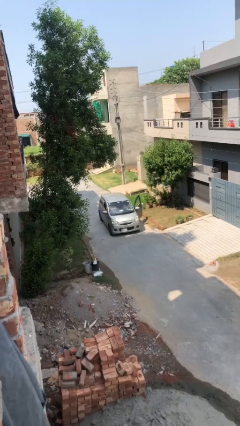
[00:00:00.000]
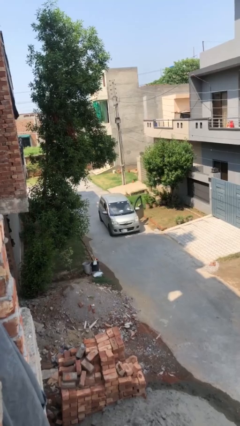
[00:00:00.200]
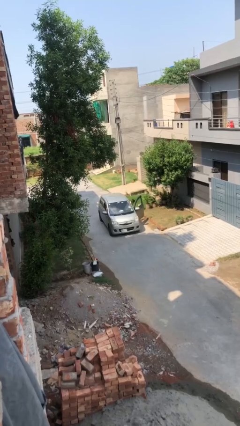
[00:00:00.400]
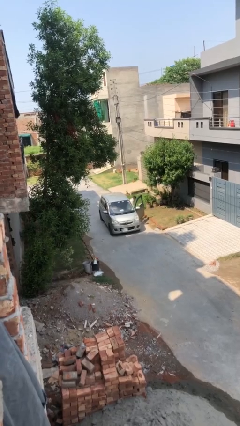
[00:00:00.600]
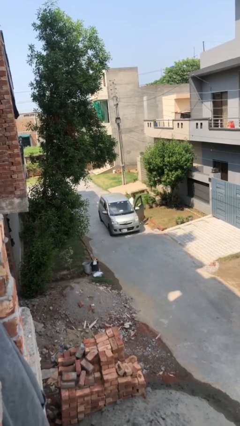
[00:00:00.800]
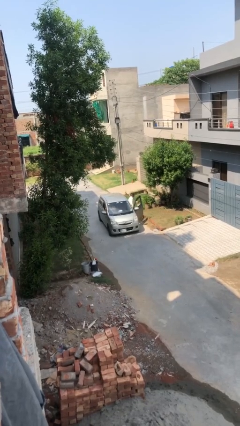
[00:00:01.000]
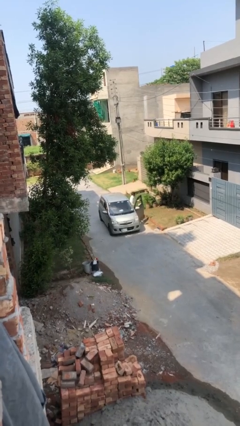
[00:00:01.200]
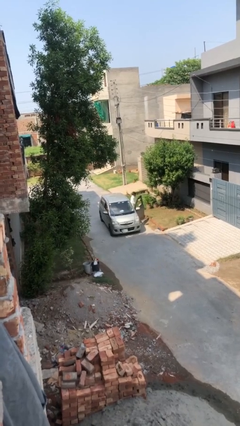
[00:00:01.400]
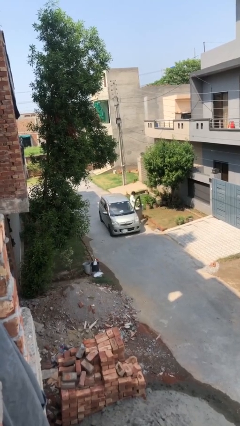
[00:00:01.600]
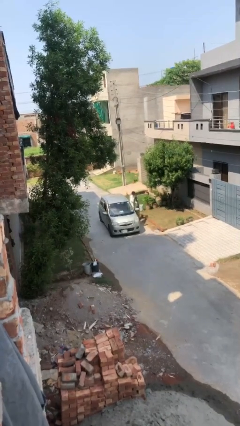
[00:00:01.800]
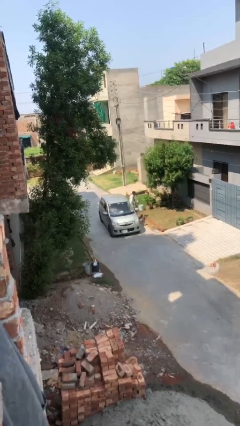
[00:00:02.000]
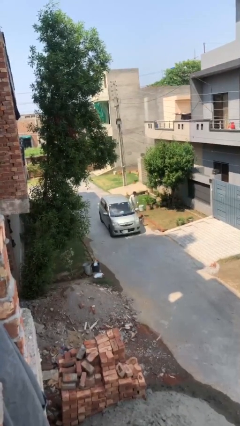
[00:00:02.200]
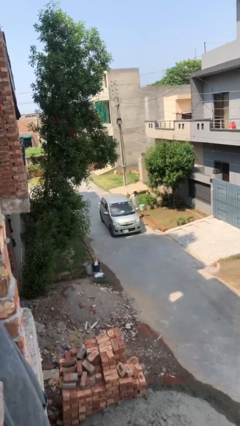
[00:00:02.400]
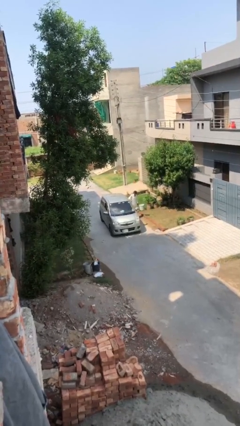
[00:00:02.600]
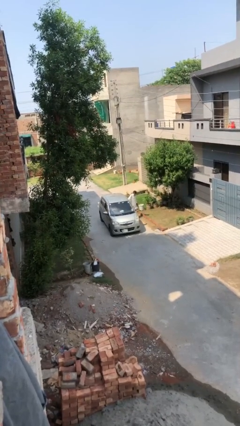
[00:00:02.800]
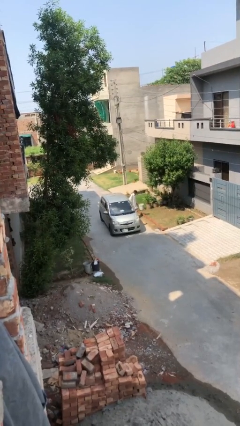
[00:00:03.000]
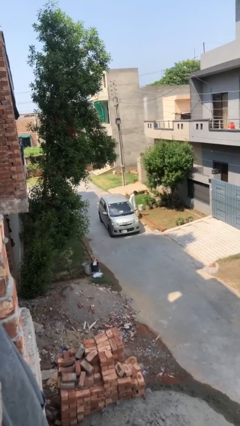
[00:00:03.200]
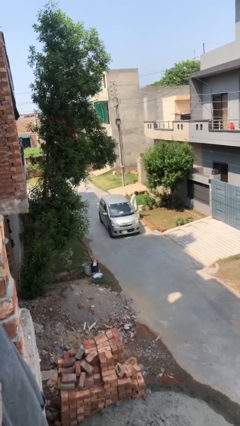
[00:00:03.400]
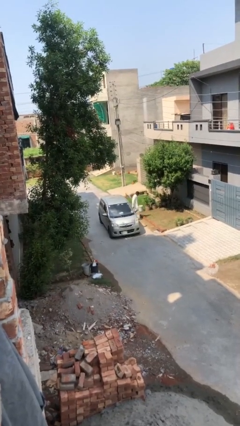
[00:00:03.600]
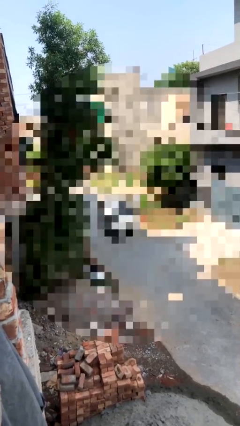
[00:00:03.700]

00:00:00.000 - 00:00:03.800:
car drops off person

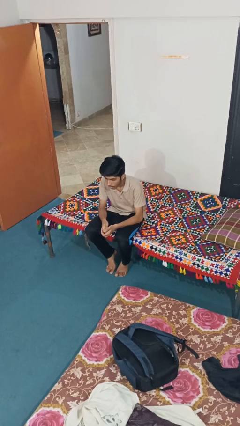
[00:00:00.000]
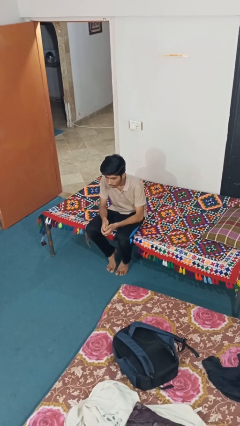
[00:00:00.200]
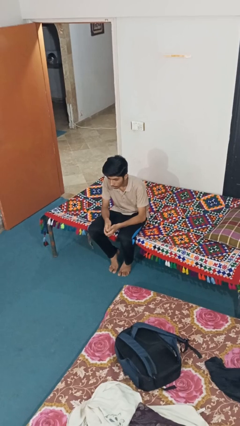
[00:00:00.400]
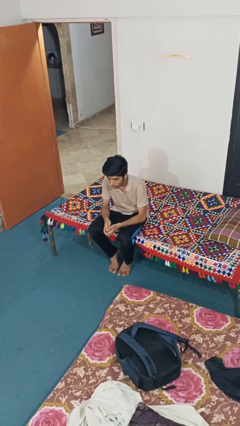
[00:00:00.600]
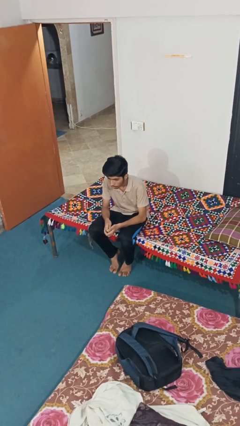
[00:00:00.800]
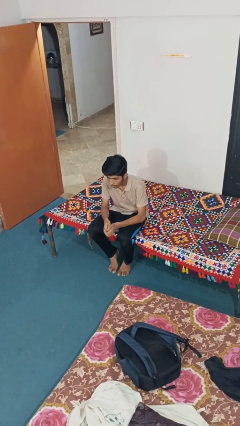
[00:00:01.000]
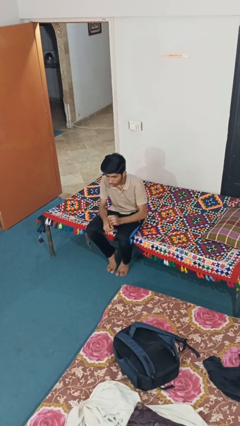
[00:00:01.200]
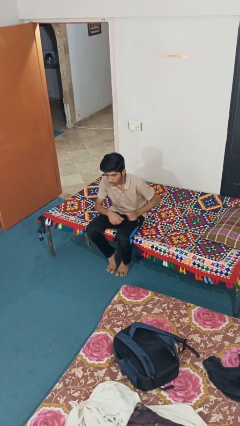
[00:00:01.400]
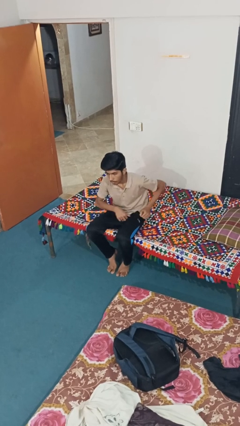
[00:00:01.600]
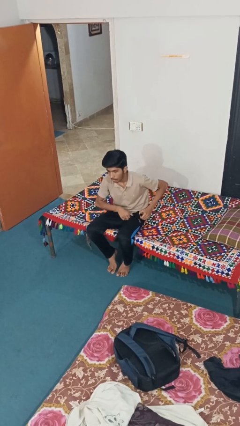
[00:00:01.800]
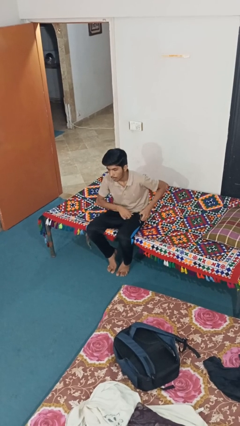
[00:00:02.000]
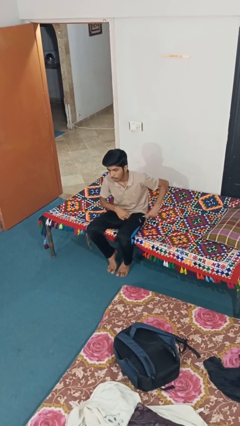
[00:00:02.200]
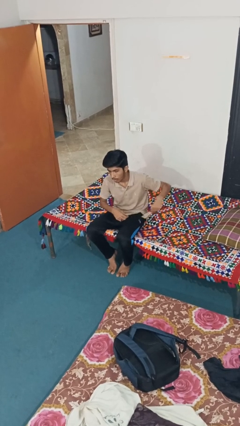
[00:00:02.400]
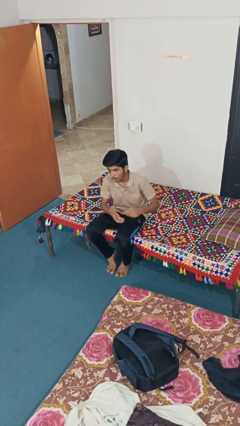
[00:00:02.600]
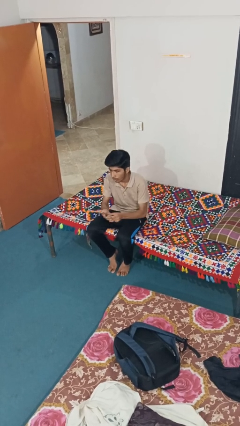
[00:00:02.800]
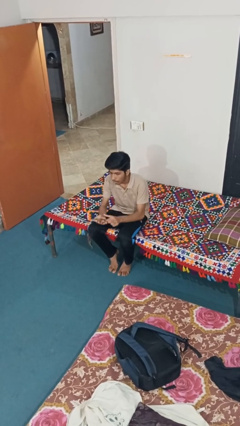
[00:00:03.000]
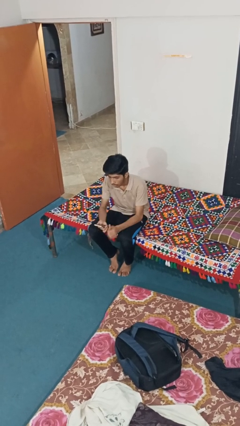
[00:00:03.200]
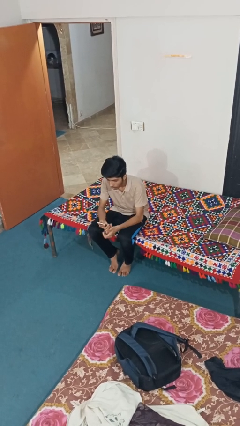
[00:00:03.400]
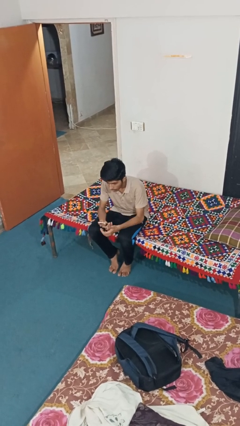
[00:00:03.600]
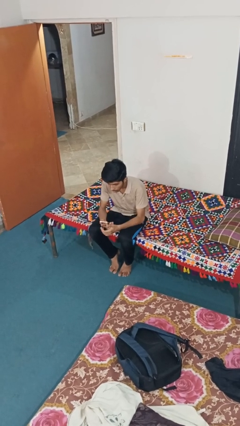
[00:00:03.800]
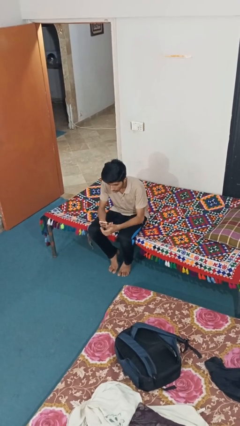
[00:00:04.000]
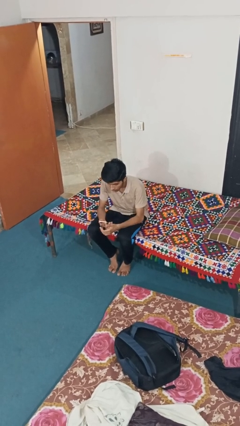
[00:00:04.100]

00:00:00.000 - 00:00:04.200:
person takes phone from pocket

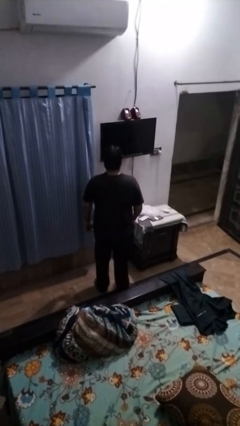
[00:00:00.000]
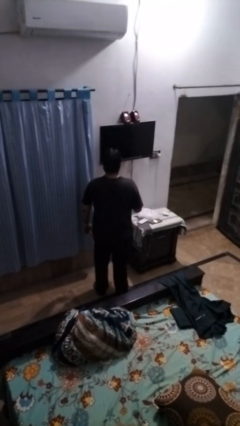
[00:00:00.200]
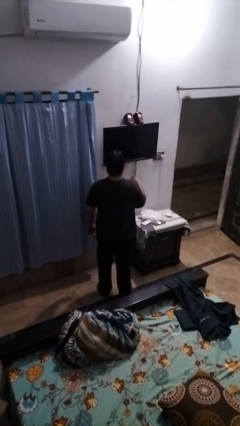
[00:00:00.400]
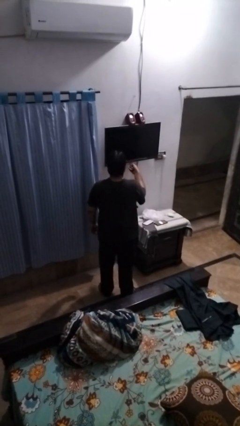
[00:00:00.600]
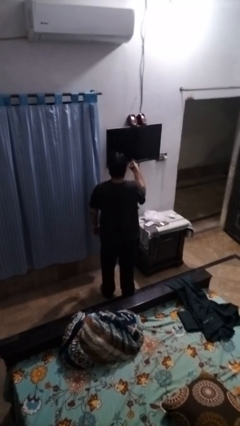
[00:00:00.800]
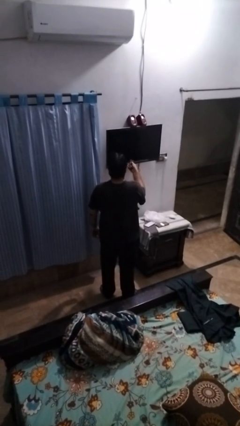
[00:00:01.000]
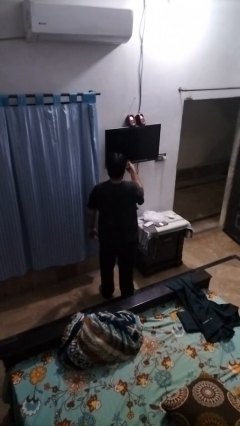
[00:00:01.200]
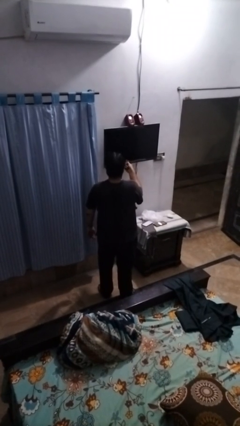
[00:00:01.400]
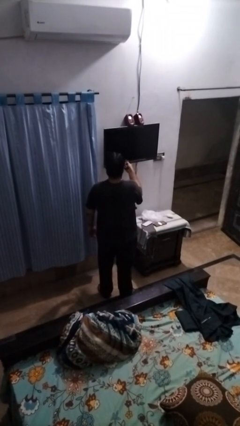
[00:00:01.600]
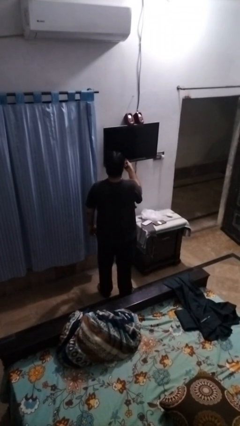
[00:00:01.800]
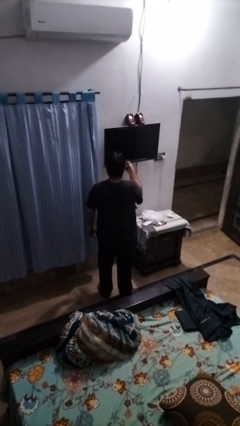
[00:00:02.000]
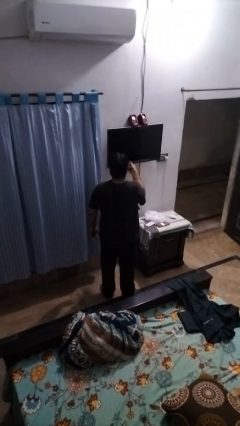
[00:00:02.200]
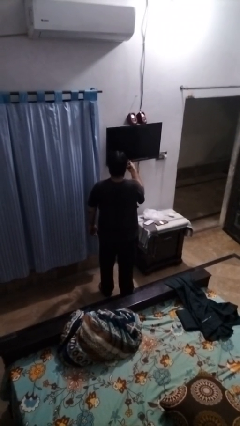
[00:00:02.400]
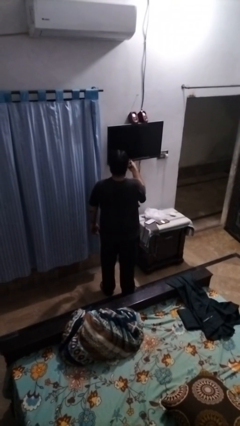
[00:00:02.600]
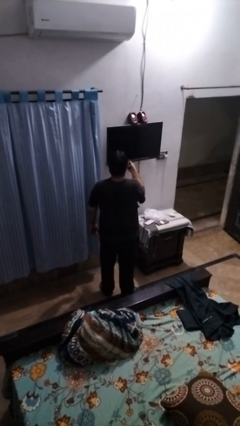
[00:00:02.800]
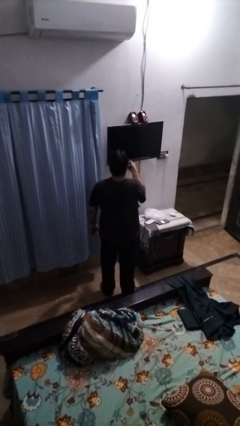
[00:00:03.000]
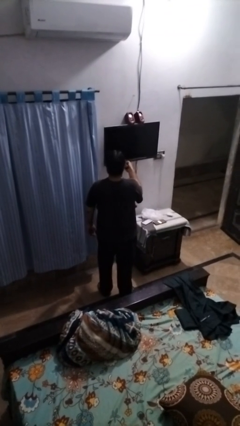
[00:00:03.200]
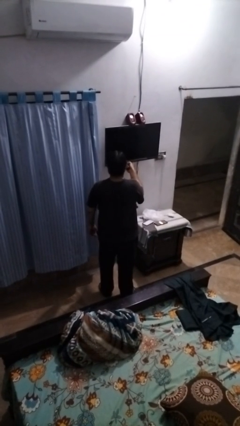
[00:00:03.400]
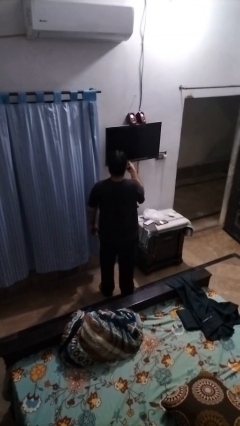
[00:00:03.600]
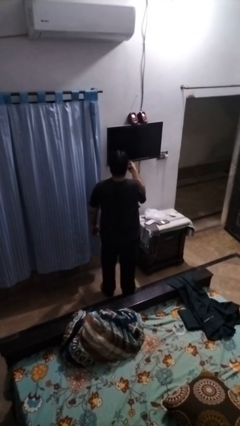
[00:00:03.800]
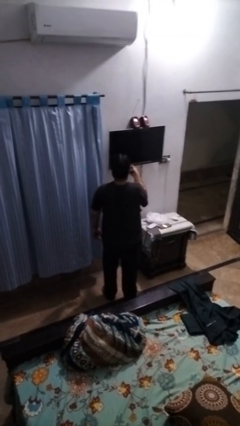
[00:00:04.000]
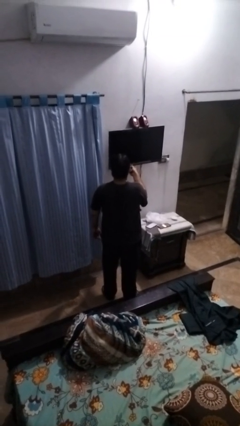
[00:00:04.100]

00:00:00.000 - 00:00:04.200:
person uses television remote

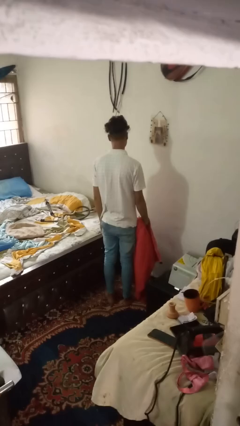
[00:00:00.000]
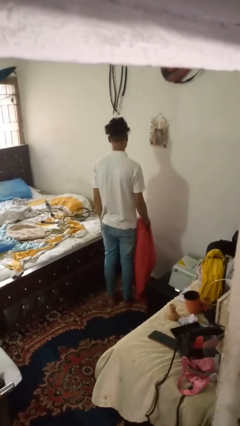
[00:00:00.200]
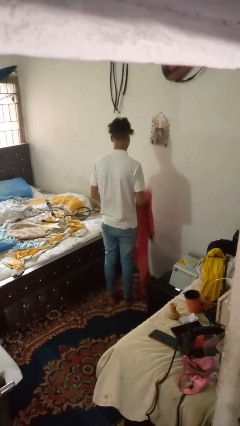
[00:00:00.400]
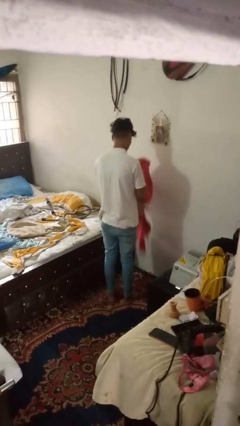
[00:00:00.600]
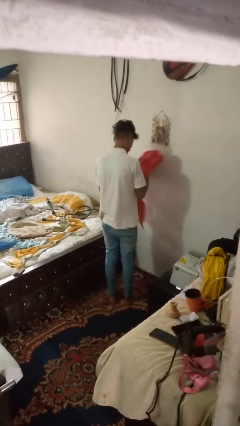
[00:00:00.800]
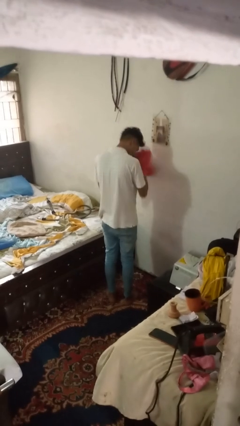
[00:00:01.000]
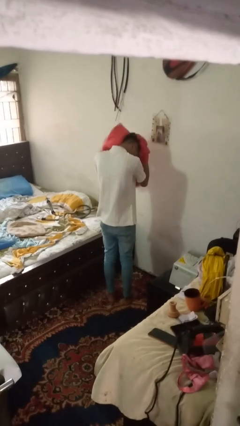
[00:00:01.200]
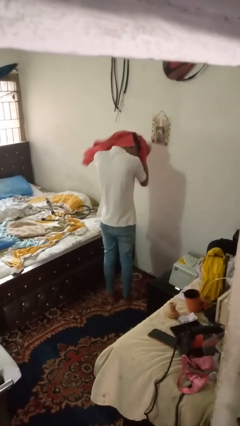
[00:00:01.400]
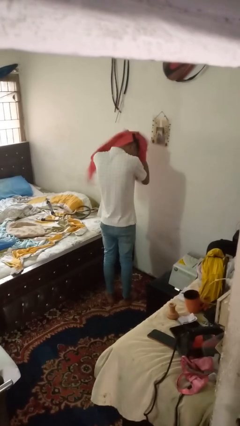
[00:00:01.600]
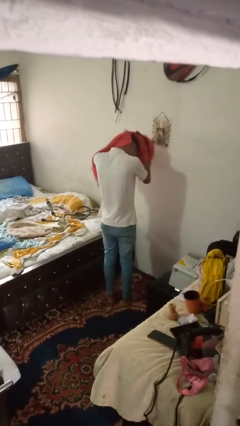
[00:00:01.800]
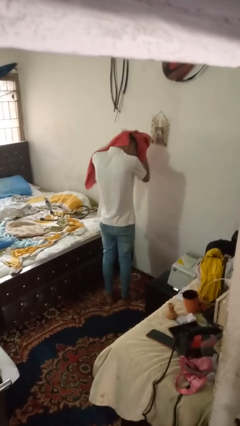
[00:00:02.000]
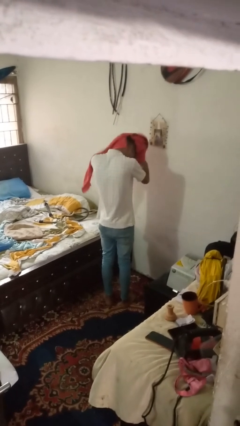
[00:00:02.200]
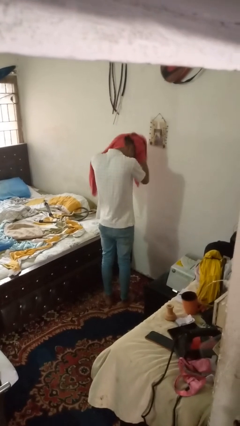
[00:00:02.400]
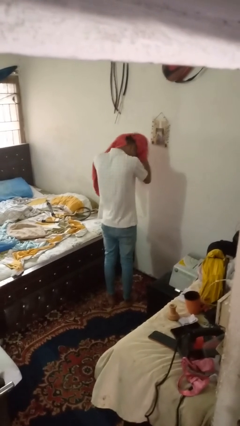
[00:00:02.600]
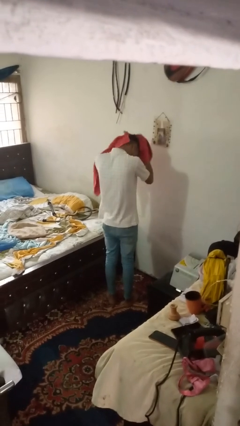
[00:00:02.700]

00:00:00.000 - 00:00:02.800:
person dries hair with towel

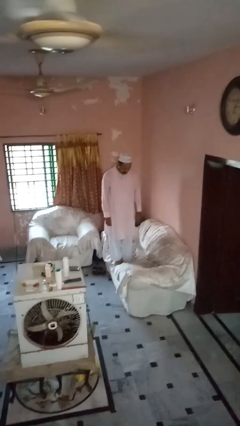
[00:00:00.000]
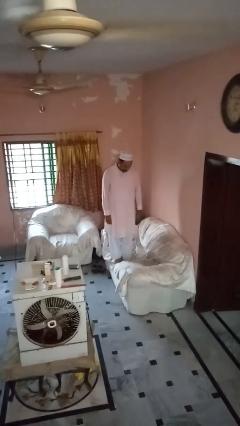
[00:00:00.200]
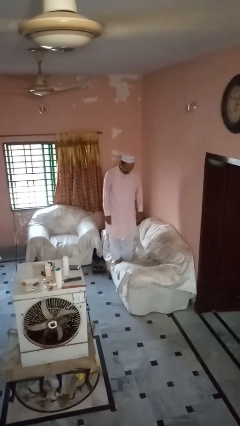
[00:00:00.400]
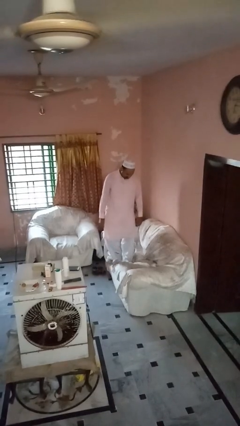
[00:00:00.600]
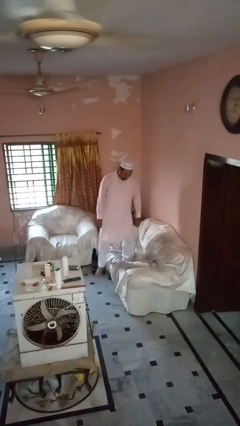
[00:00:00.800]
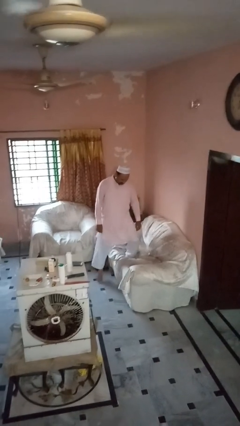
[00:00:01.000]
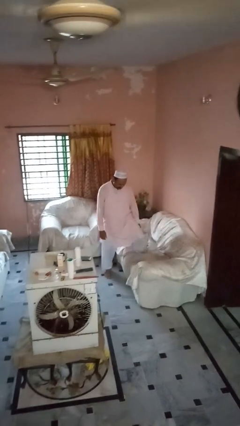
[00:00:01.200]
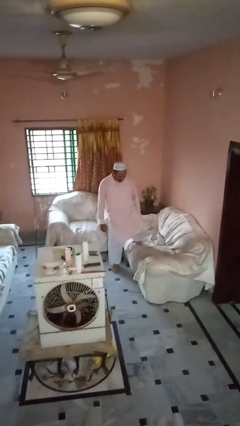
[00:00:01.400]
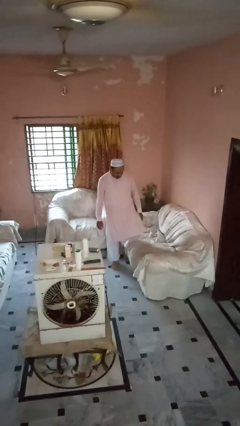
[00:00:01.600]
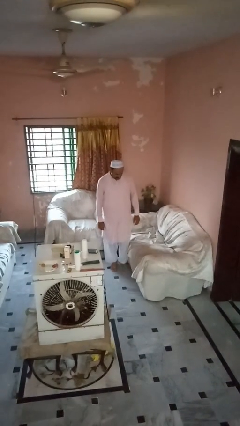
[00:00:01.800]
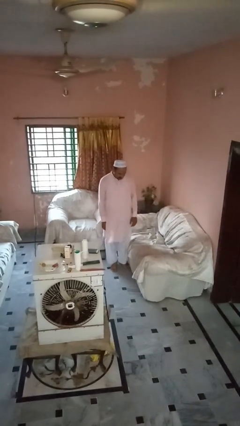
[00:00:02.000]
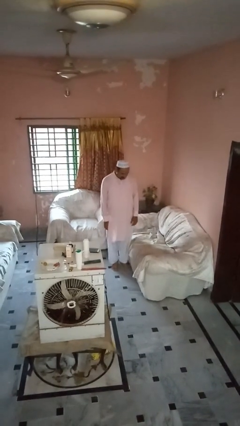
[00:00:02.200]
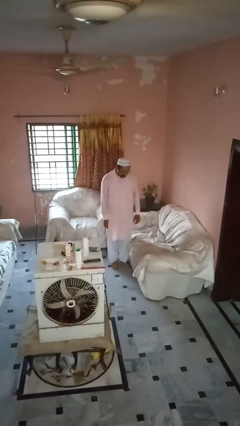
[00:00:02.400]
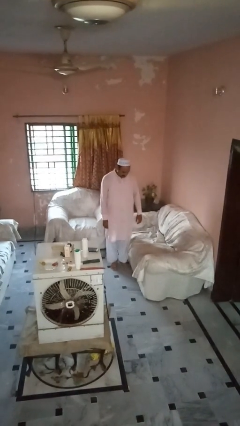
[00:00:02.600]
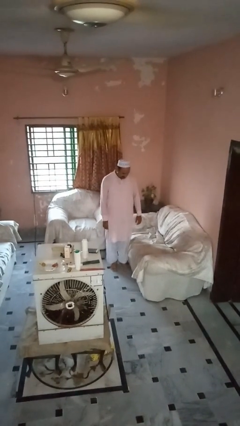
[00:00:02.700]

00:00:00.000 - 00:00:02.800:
person climbs off couch
